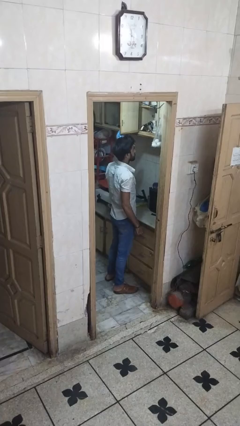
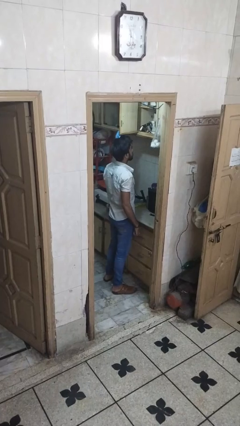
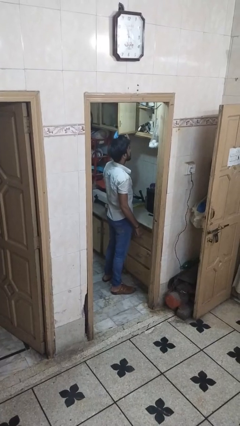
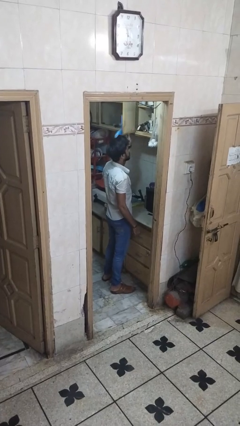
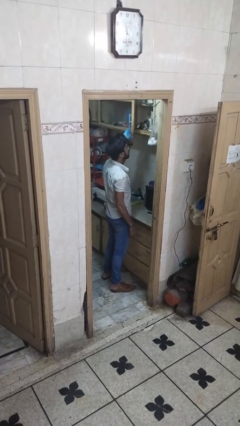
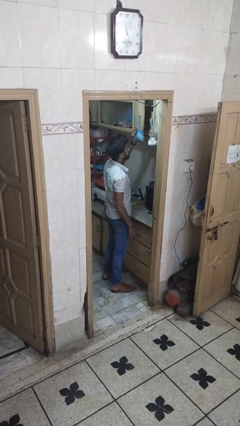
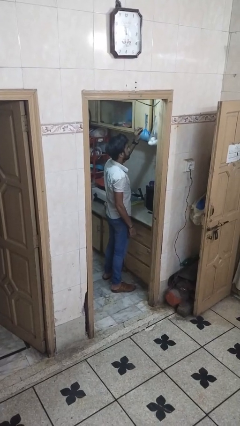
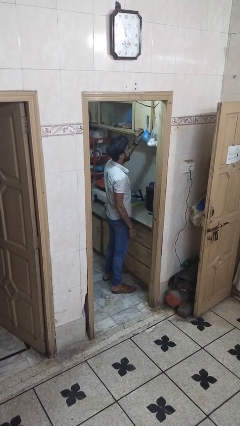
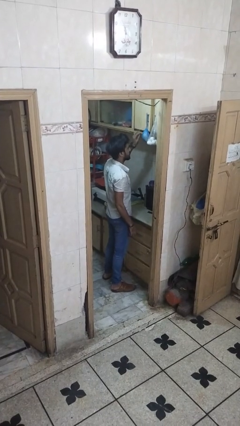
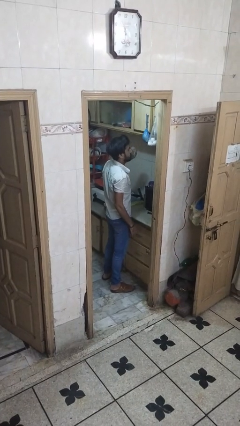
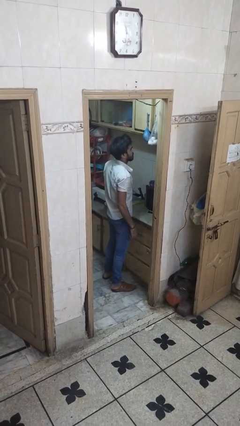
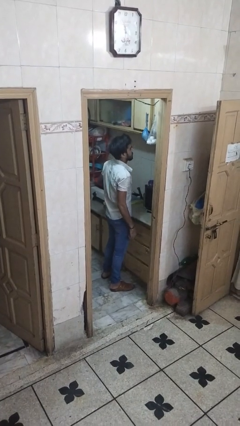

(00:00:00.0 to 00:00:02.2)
person closes cabinet

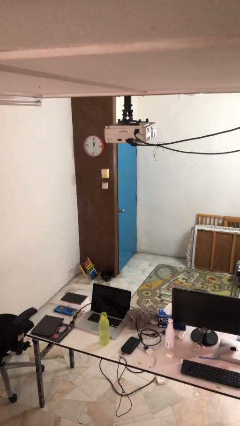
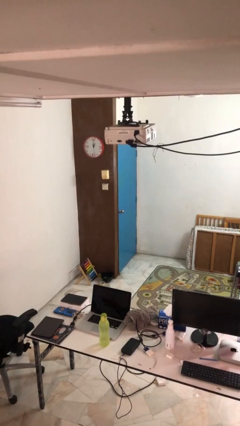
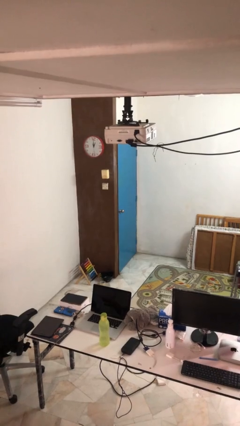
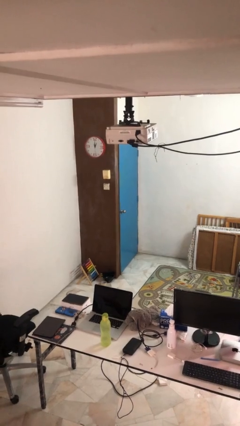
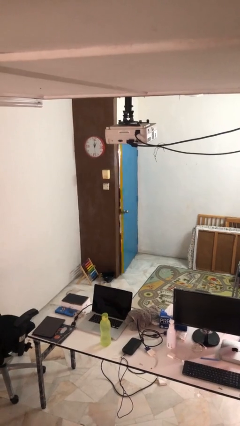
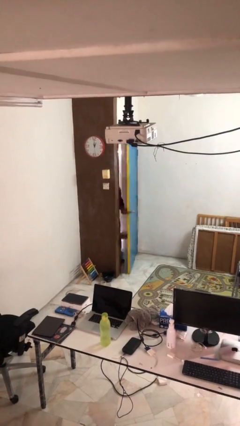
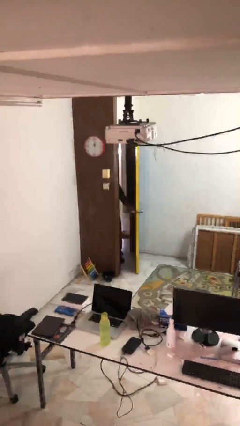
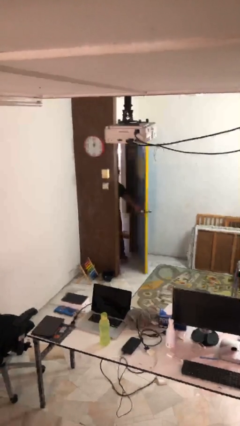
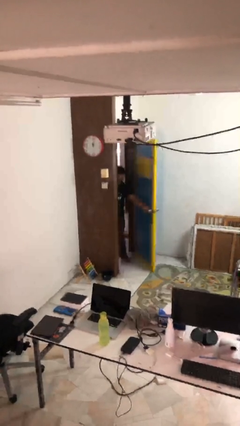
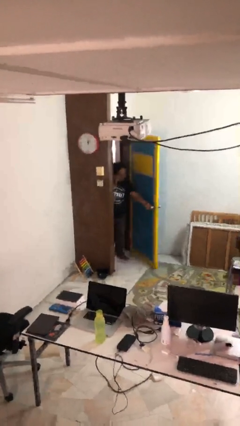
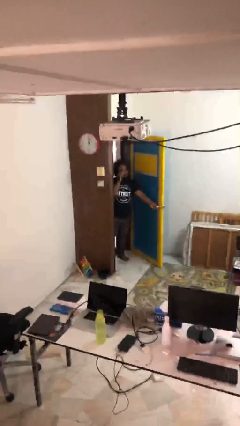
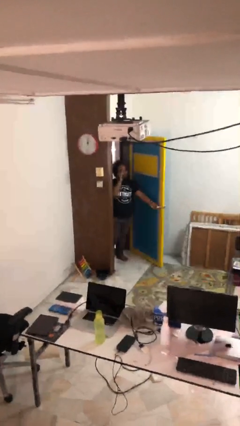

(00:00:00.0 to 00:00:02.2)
person opens facility door

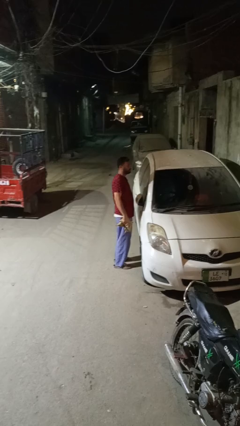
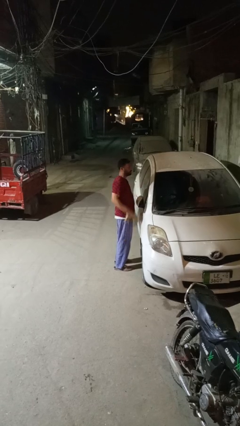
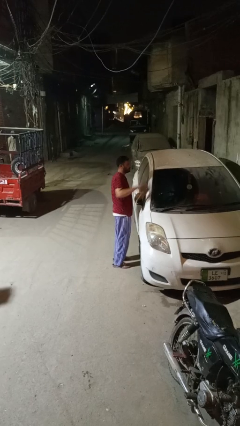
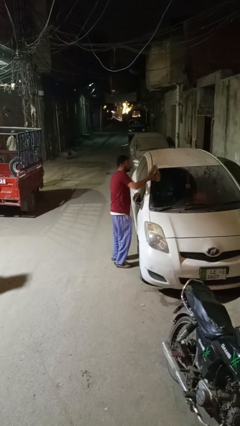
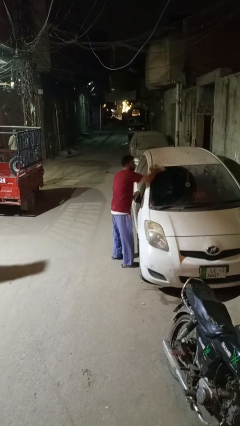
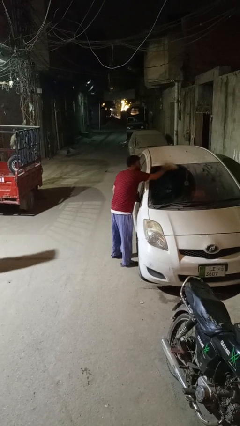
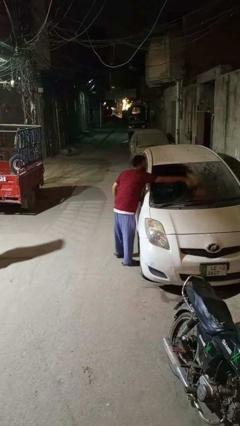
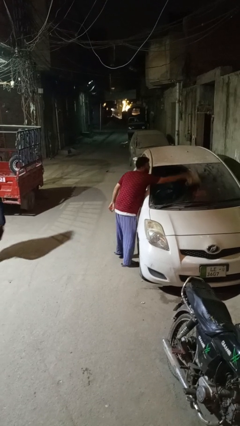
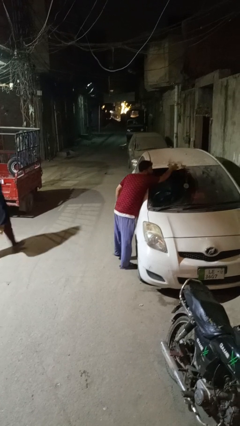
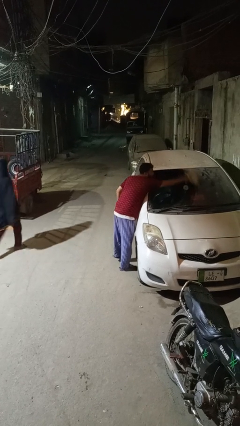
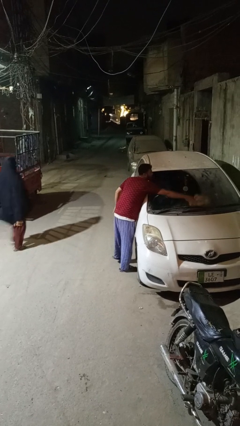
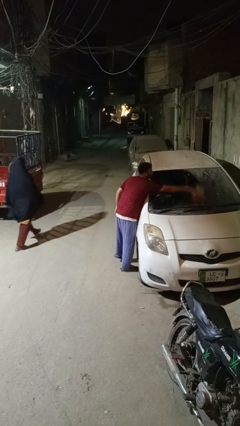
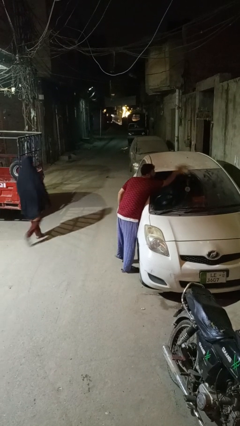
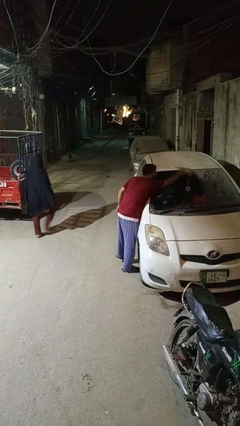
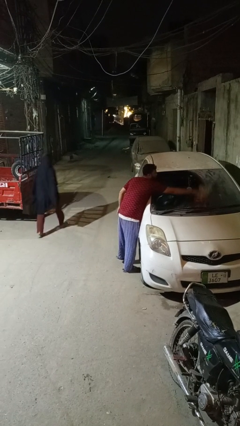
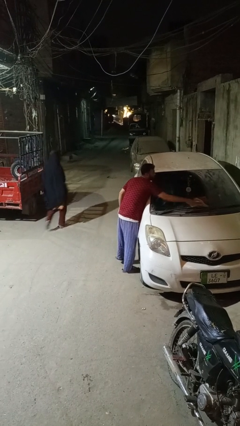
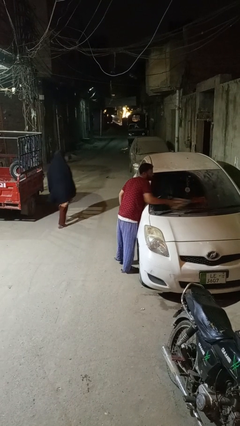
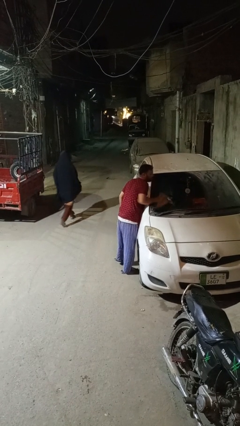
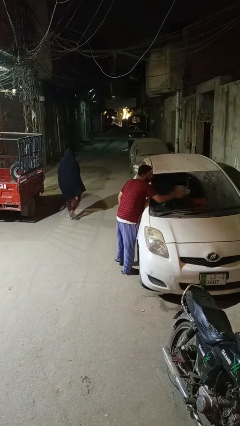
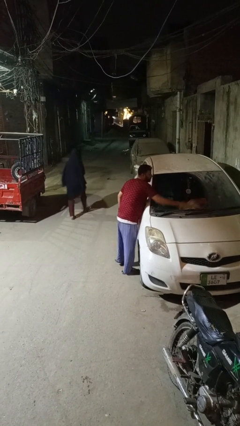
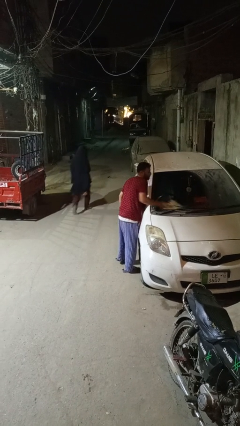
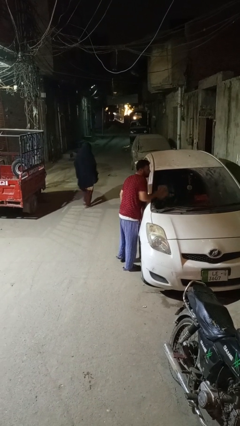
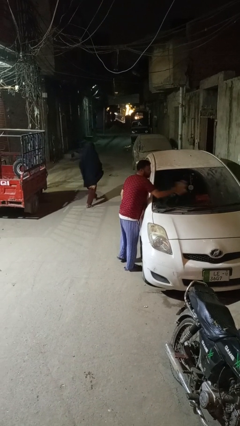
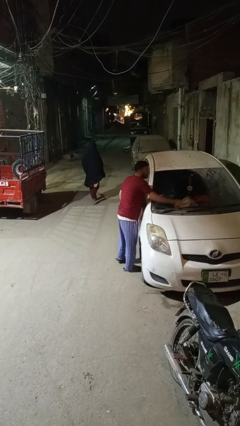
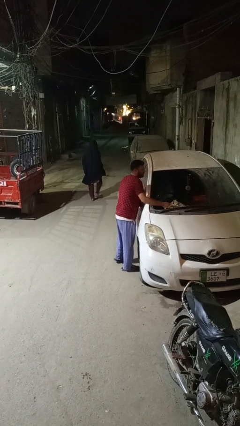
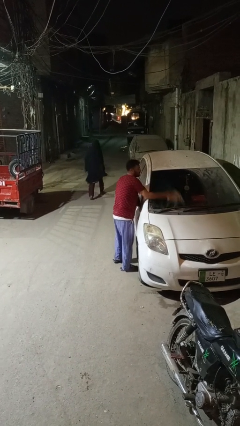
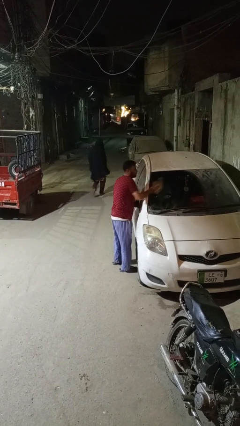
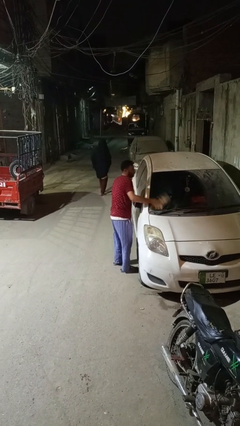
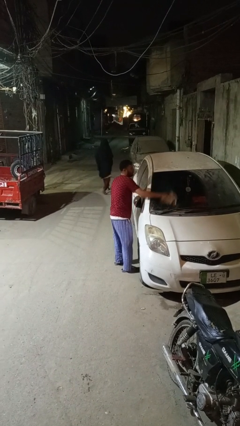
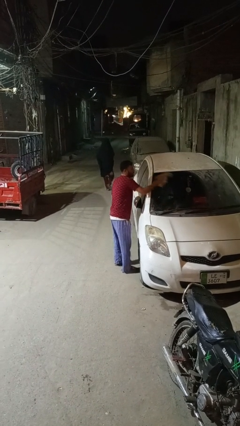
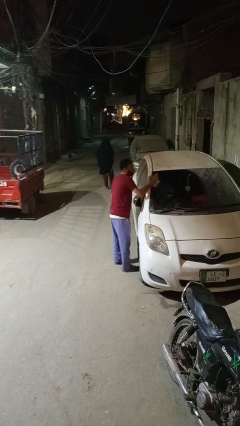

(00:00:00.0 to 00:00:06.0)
person polishes car with rag

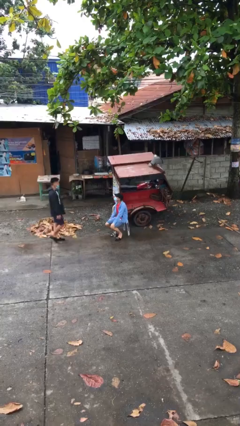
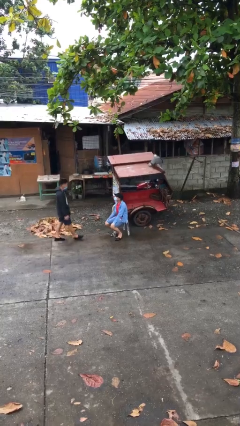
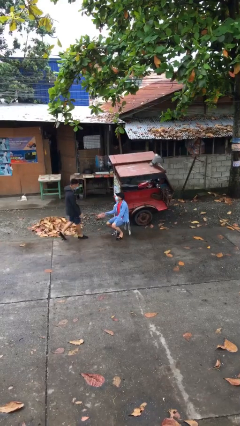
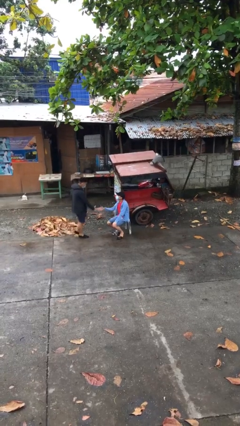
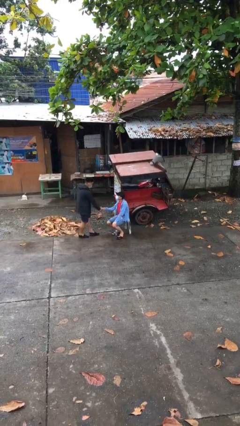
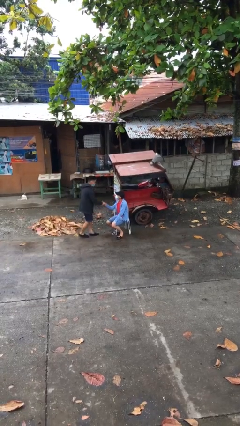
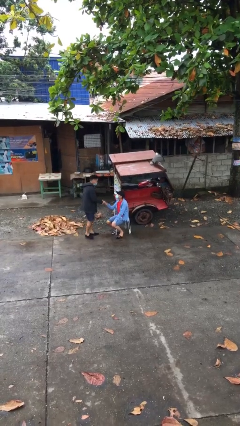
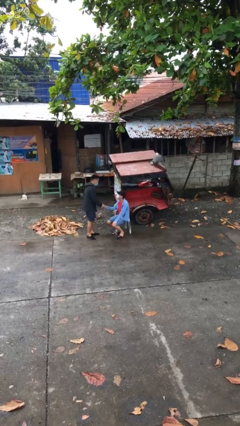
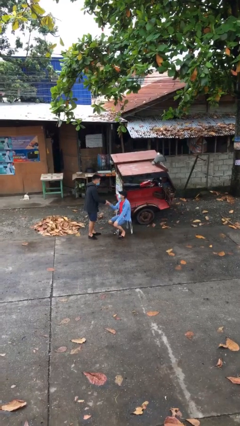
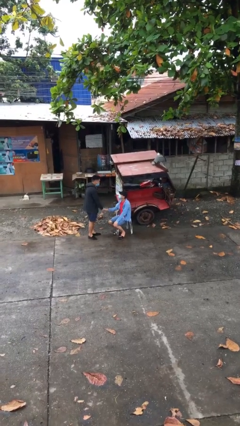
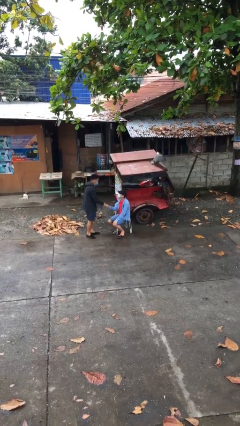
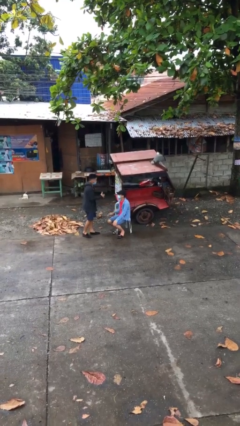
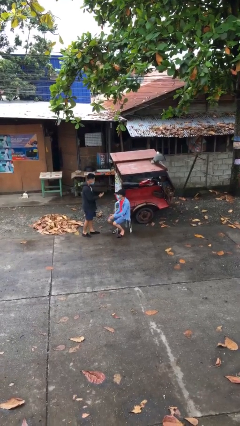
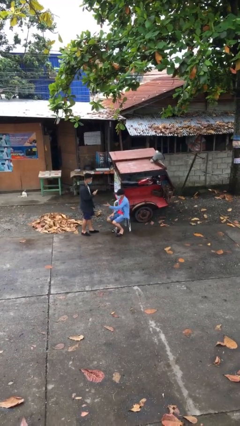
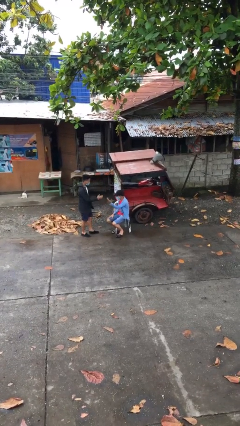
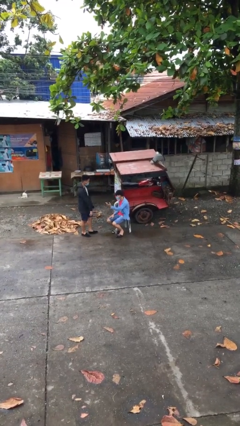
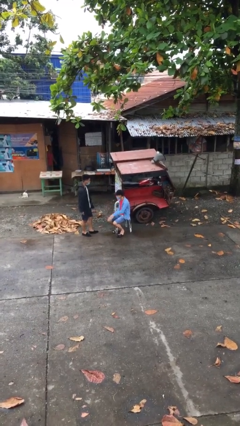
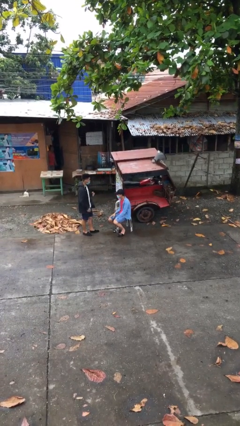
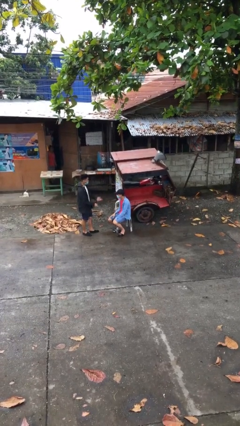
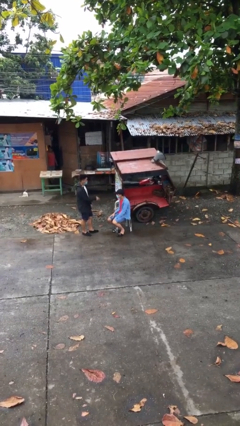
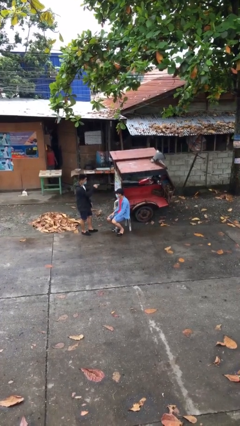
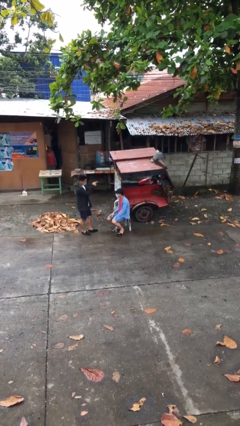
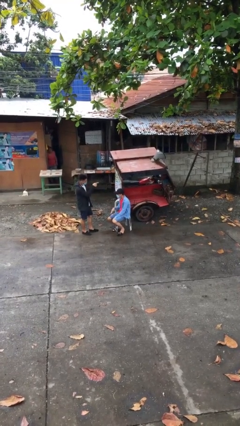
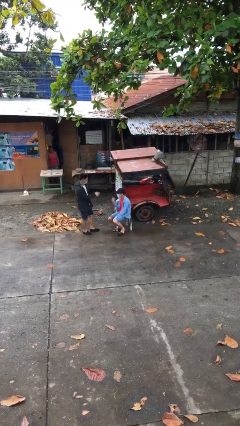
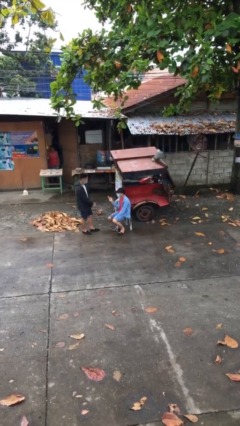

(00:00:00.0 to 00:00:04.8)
person shakes hand

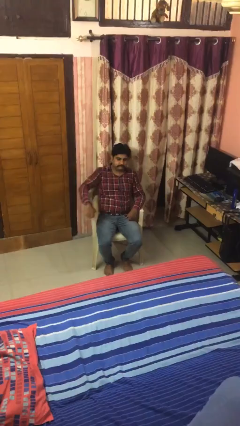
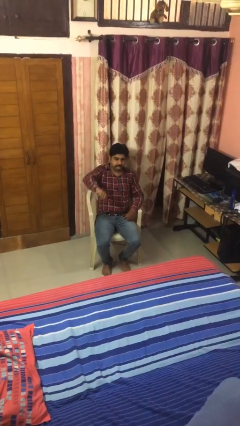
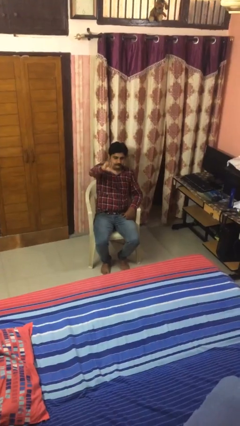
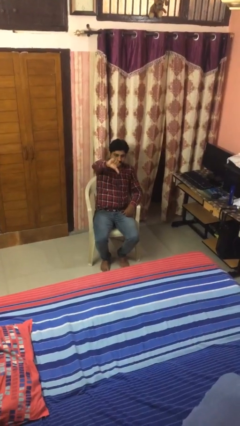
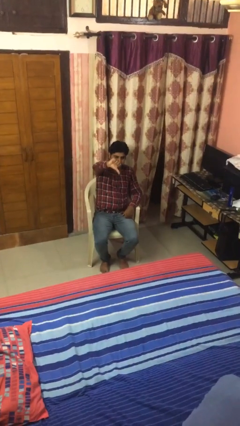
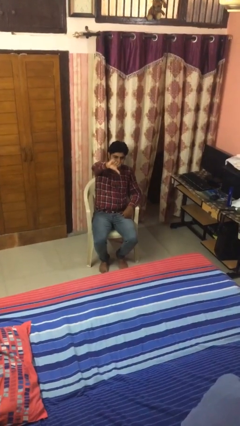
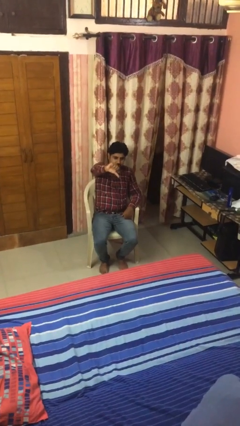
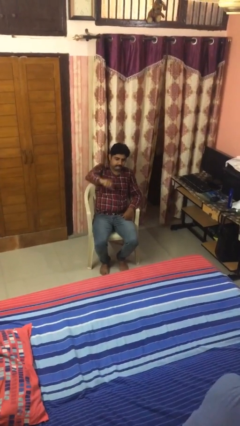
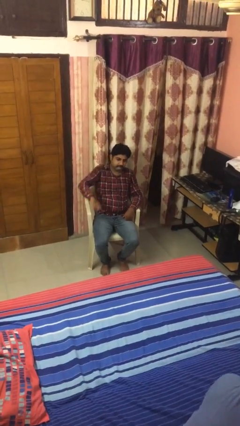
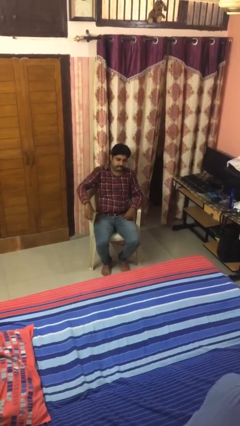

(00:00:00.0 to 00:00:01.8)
person gestures thumbs down

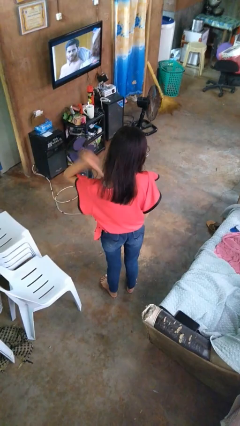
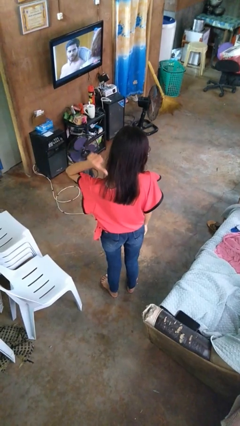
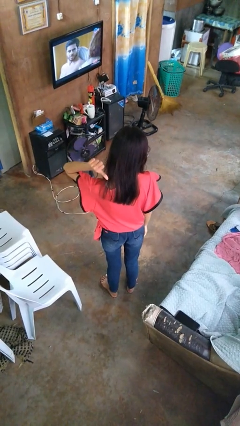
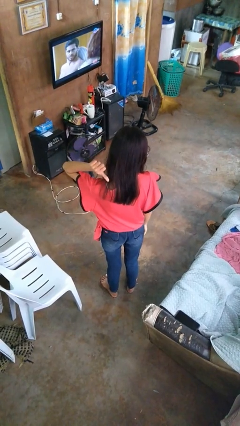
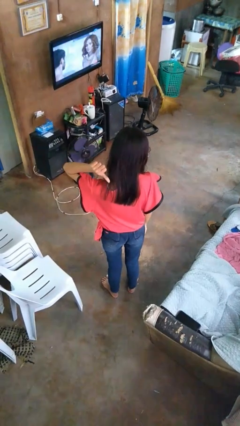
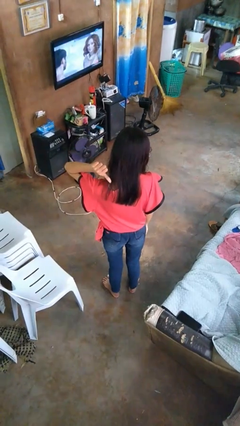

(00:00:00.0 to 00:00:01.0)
person gestures behind me
